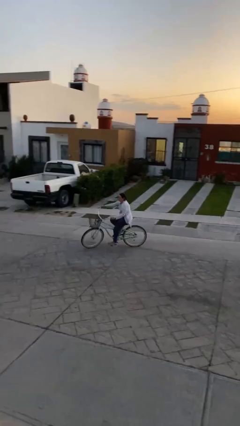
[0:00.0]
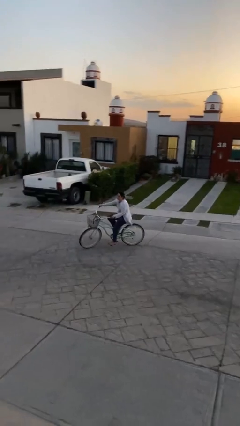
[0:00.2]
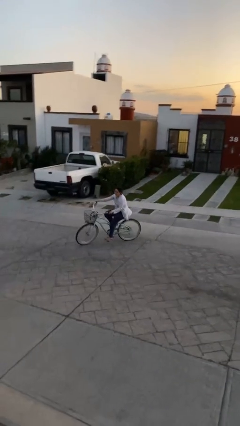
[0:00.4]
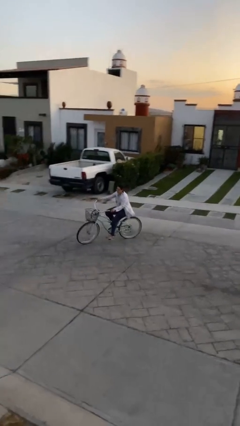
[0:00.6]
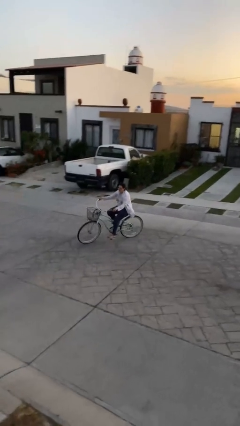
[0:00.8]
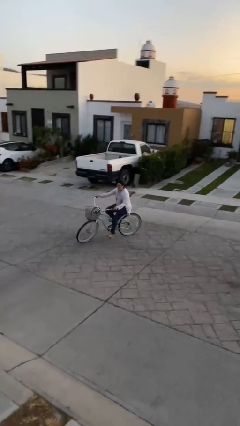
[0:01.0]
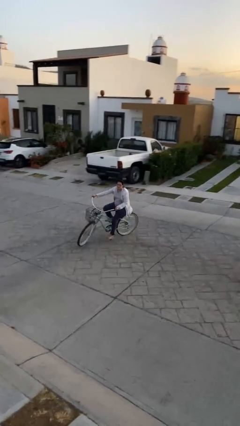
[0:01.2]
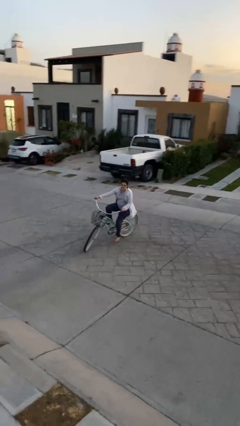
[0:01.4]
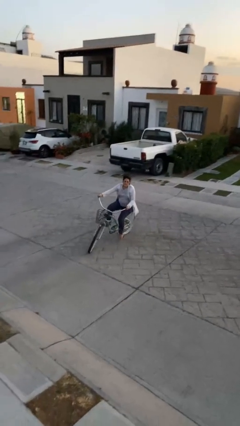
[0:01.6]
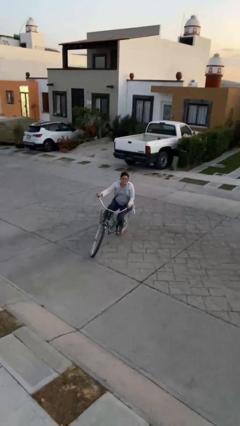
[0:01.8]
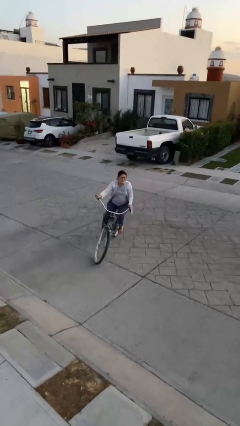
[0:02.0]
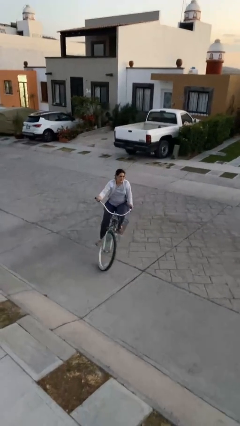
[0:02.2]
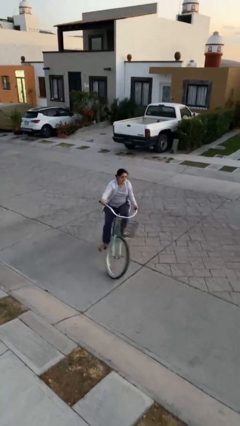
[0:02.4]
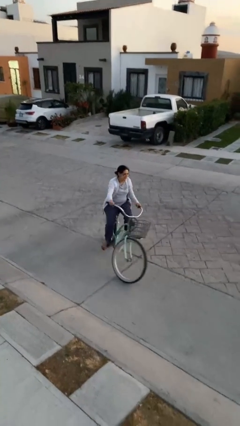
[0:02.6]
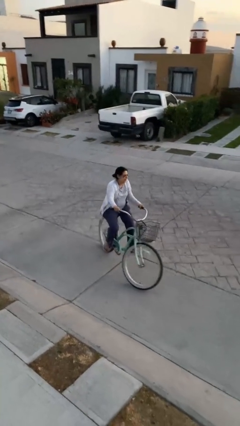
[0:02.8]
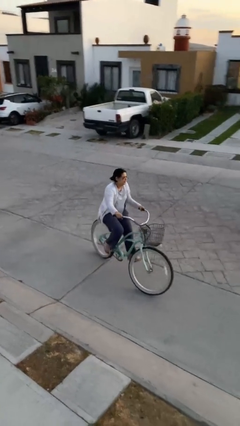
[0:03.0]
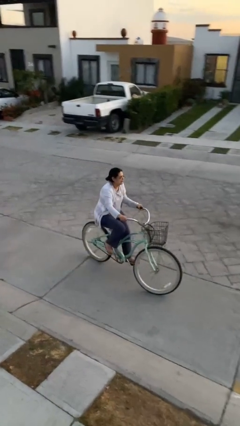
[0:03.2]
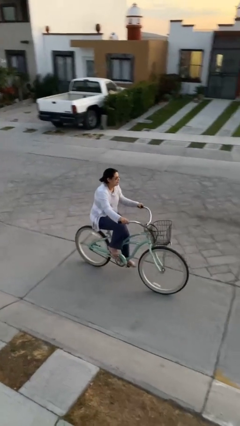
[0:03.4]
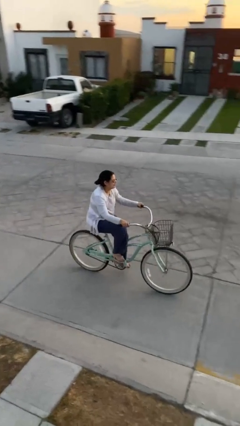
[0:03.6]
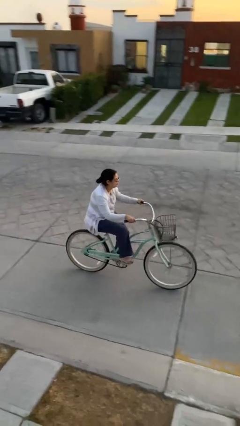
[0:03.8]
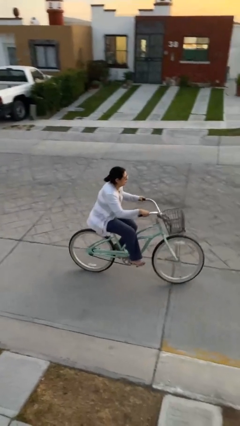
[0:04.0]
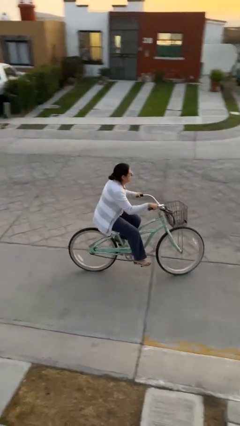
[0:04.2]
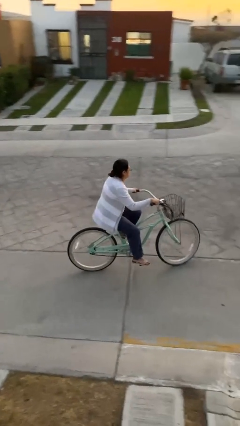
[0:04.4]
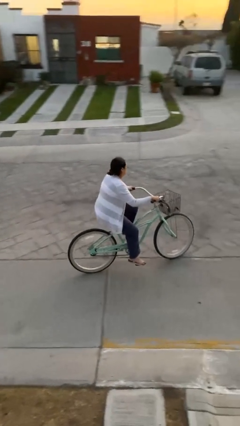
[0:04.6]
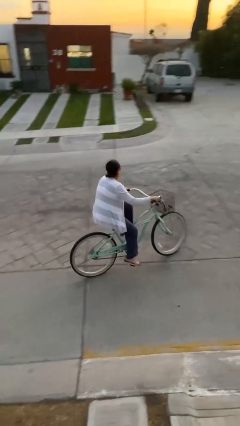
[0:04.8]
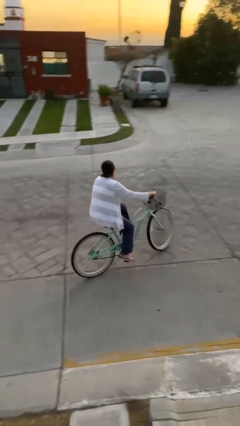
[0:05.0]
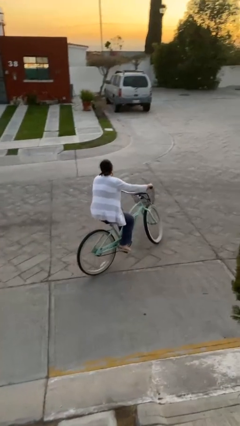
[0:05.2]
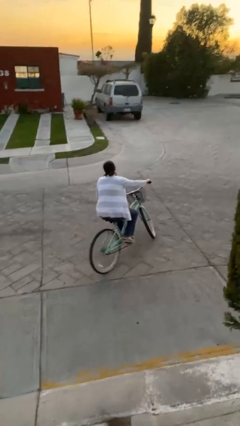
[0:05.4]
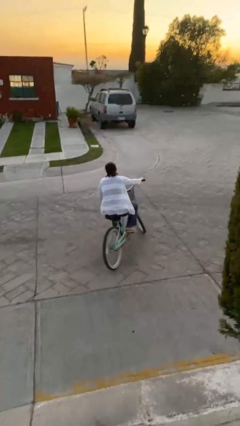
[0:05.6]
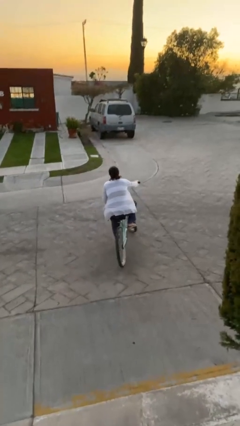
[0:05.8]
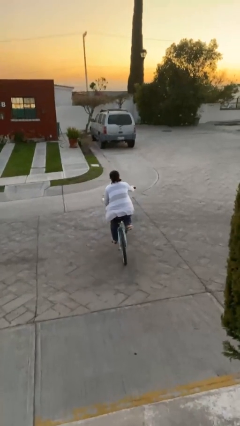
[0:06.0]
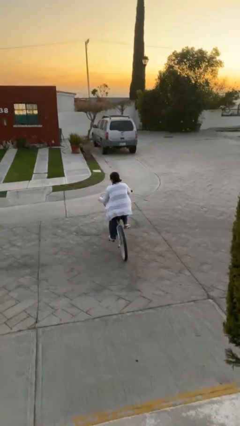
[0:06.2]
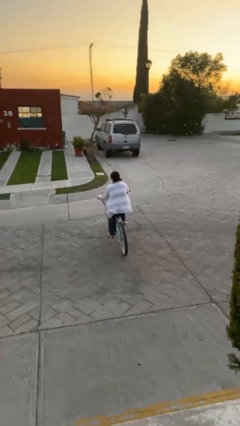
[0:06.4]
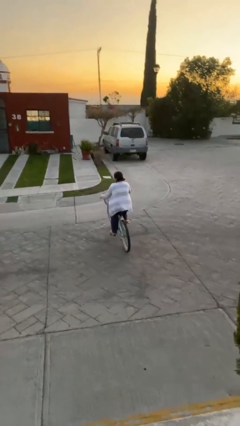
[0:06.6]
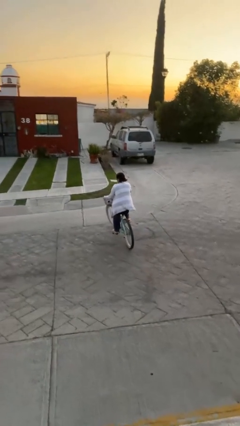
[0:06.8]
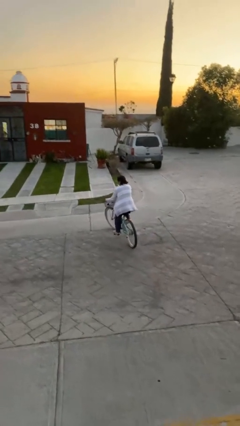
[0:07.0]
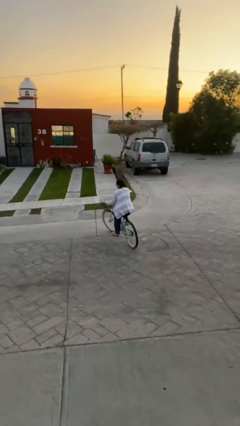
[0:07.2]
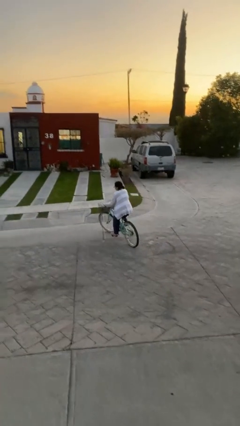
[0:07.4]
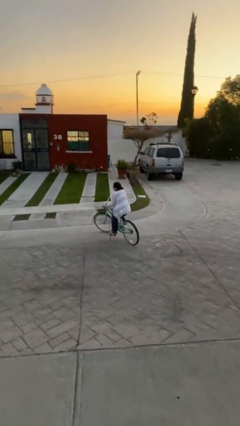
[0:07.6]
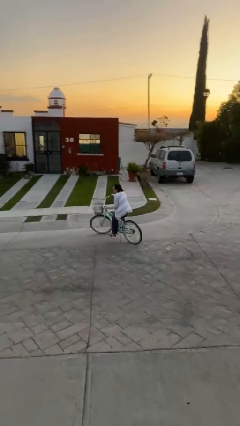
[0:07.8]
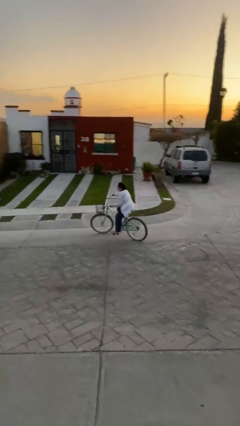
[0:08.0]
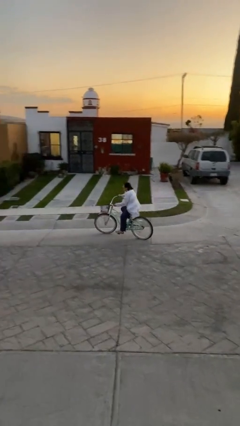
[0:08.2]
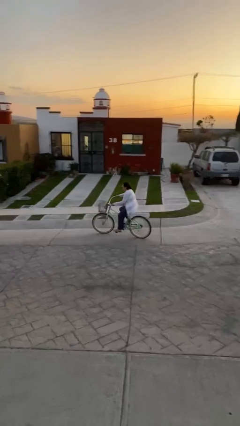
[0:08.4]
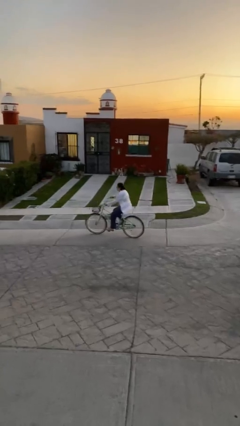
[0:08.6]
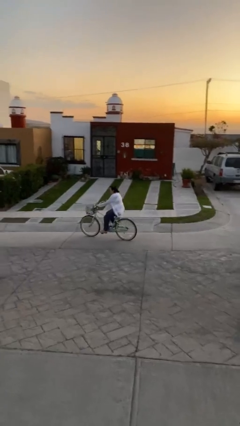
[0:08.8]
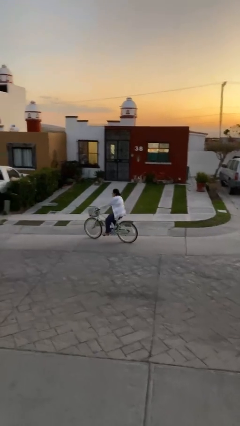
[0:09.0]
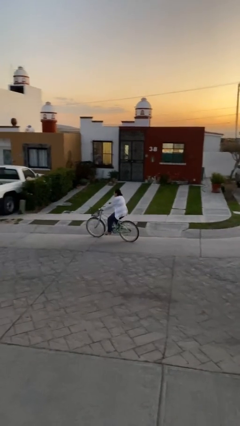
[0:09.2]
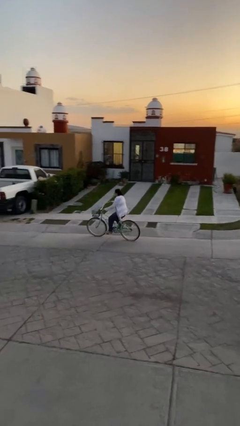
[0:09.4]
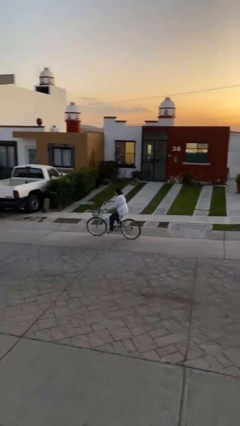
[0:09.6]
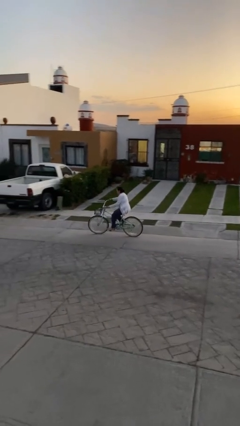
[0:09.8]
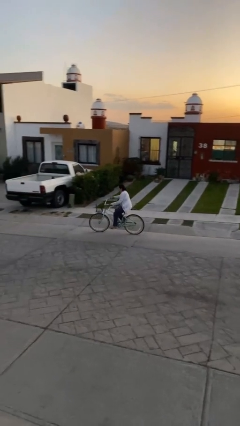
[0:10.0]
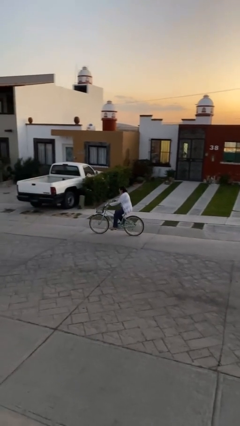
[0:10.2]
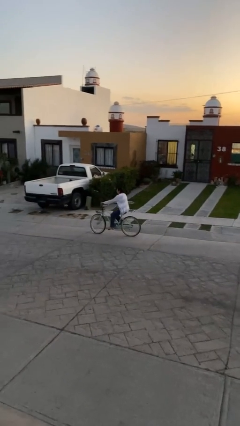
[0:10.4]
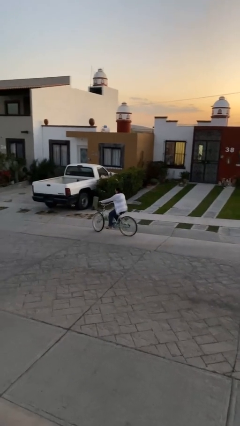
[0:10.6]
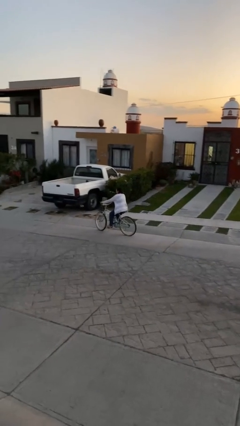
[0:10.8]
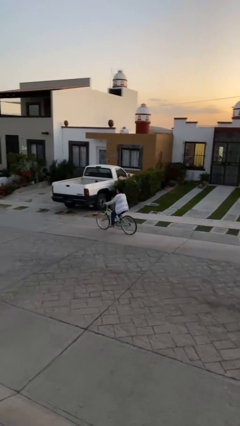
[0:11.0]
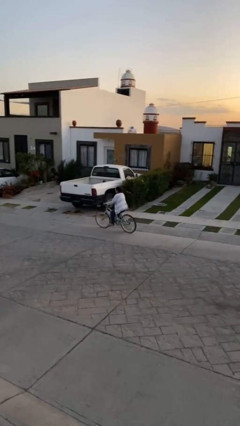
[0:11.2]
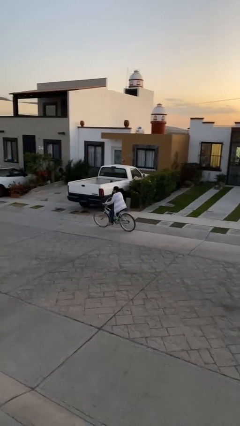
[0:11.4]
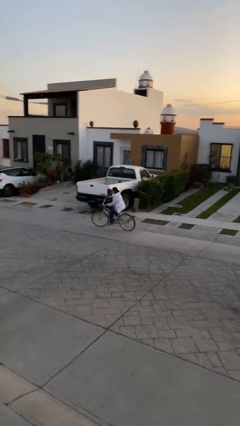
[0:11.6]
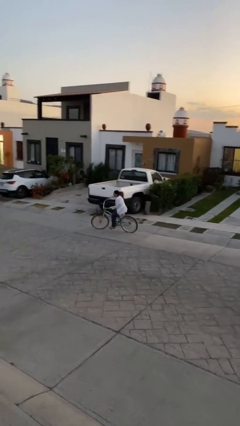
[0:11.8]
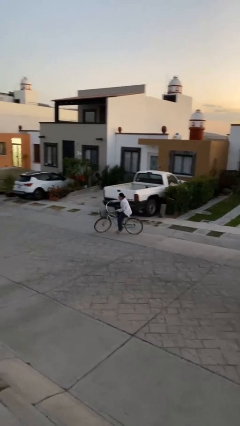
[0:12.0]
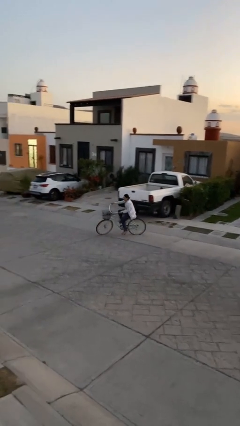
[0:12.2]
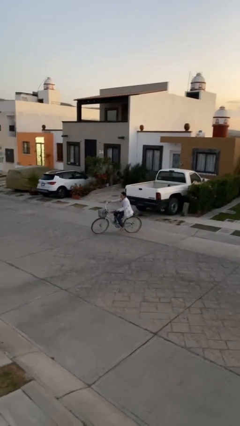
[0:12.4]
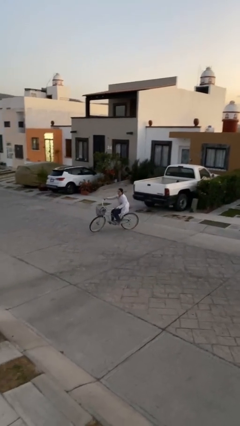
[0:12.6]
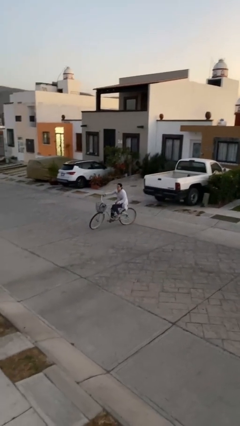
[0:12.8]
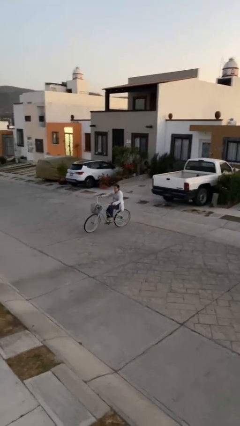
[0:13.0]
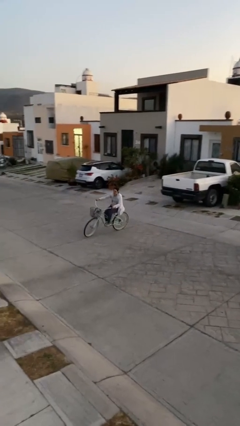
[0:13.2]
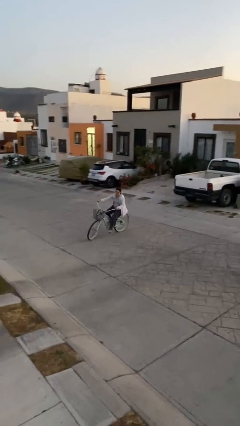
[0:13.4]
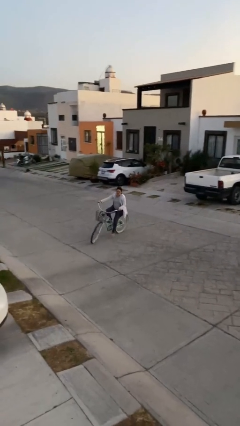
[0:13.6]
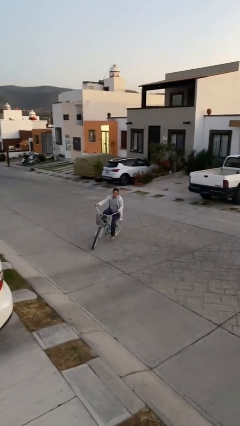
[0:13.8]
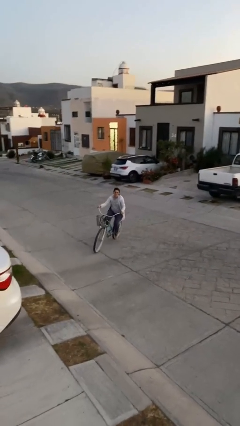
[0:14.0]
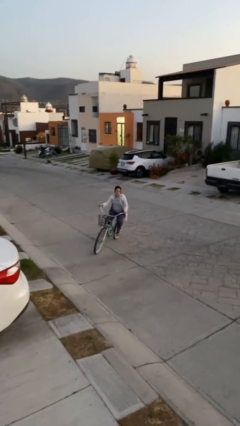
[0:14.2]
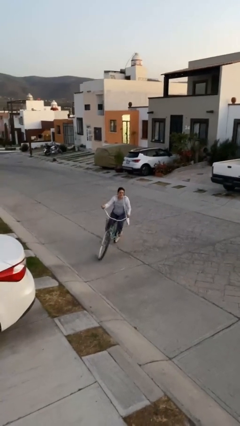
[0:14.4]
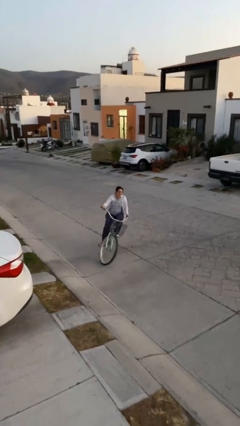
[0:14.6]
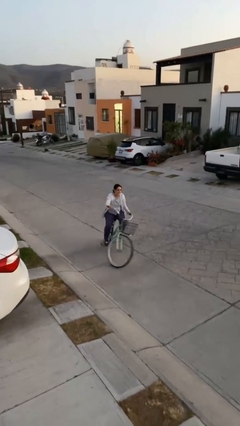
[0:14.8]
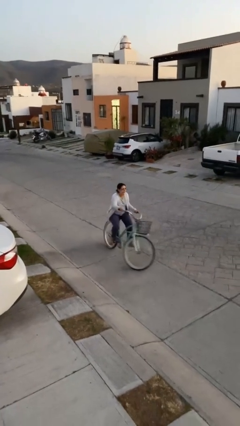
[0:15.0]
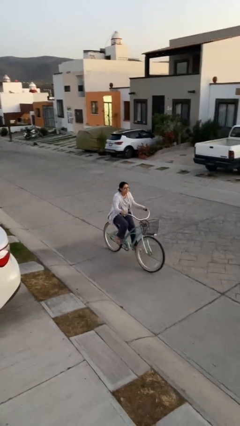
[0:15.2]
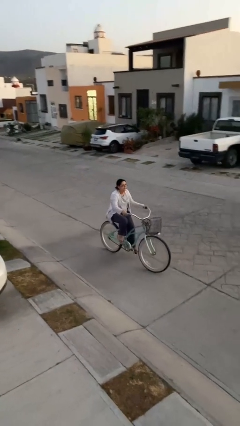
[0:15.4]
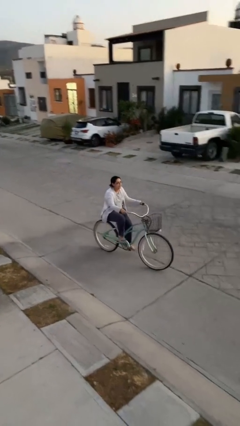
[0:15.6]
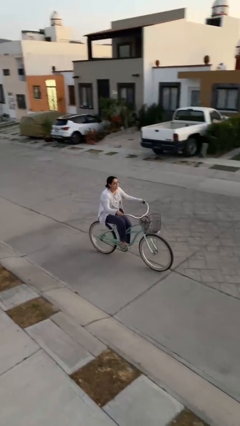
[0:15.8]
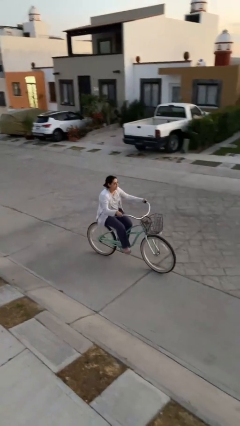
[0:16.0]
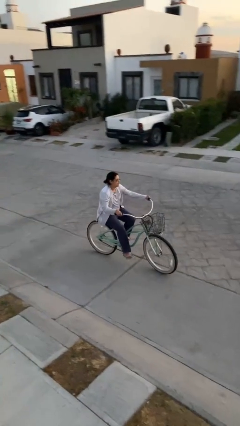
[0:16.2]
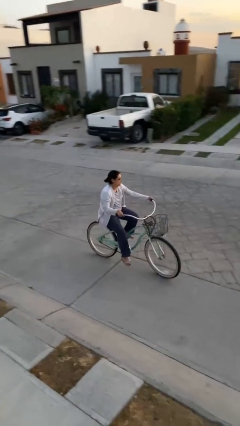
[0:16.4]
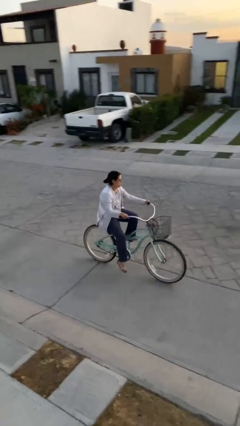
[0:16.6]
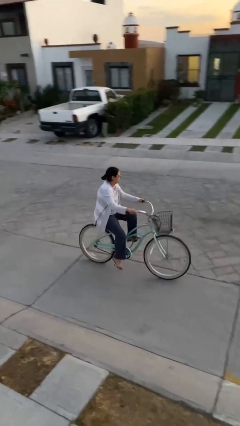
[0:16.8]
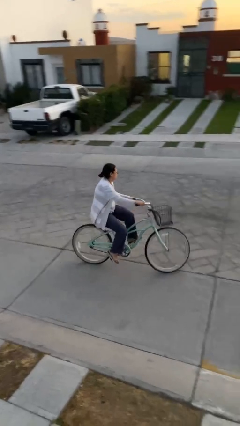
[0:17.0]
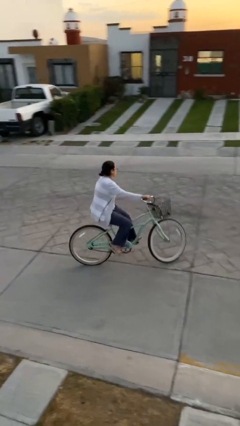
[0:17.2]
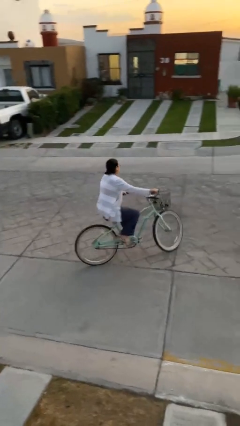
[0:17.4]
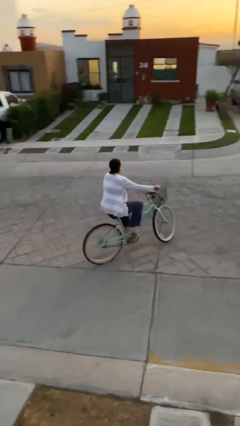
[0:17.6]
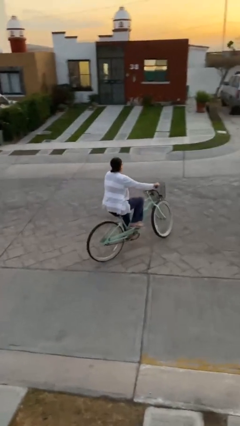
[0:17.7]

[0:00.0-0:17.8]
person rides bicycle

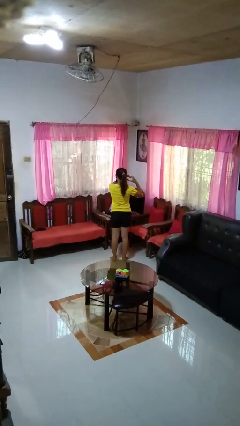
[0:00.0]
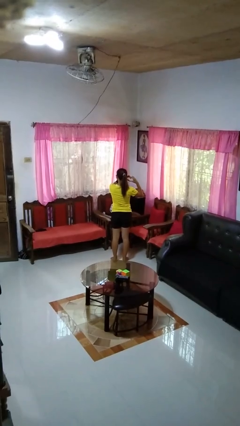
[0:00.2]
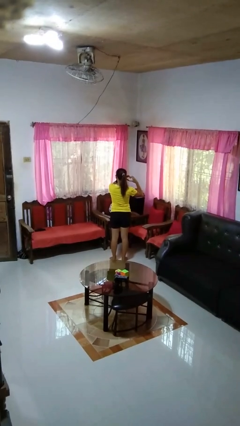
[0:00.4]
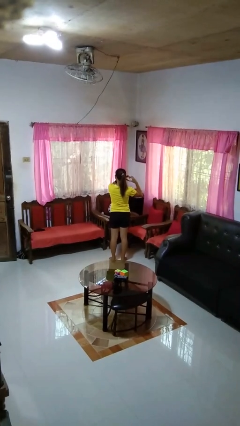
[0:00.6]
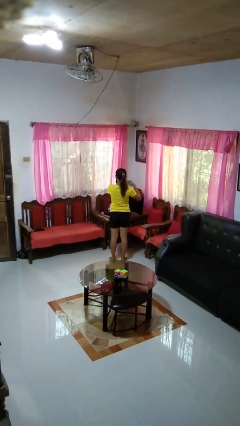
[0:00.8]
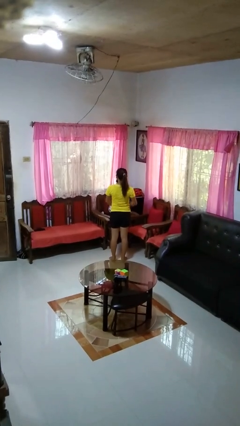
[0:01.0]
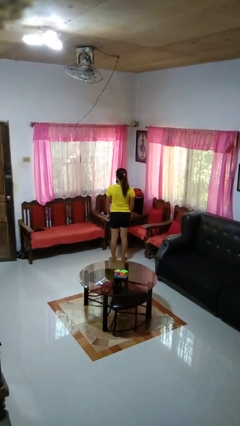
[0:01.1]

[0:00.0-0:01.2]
person gestures heart
